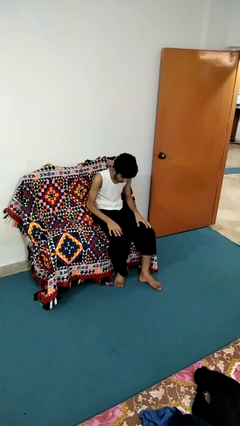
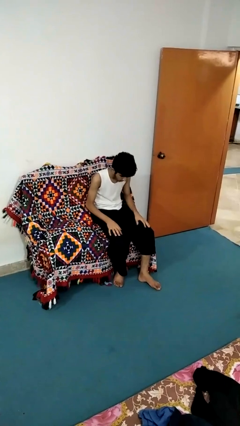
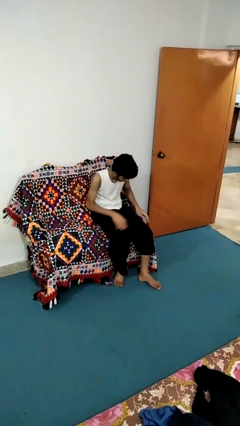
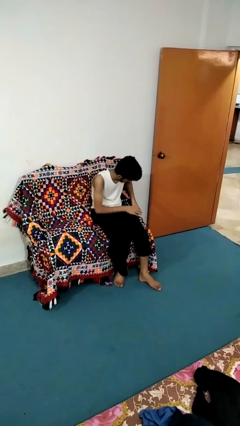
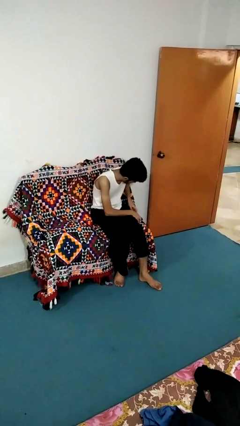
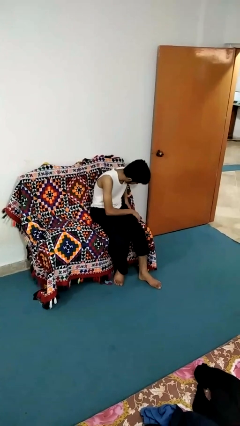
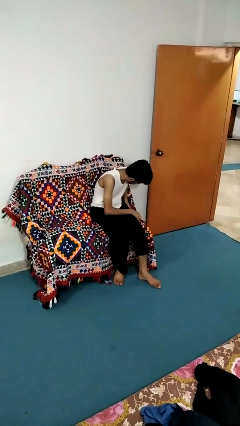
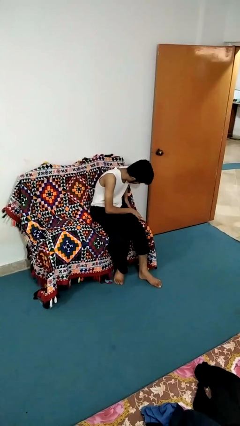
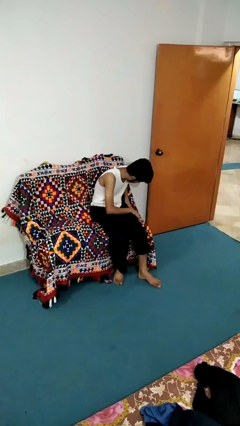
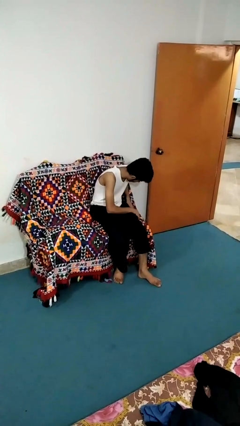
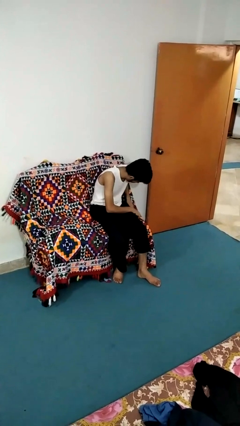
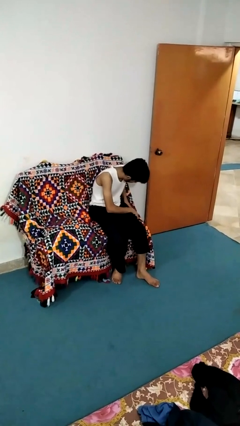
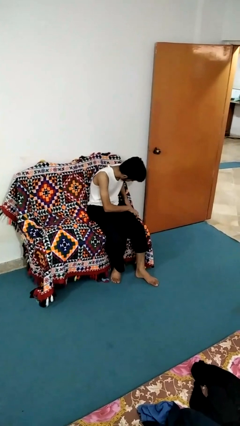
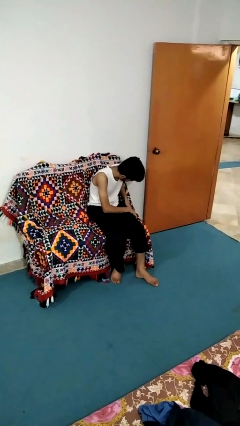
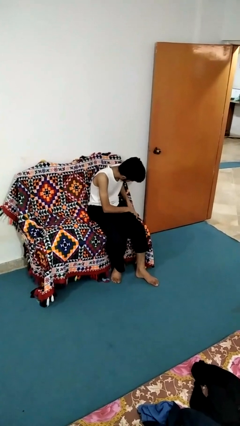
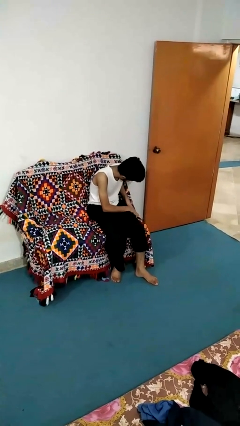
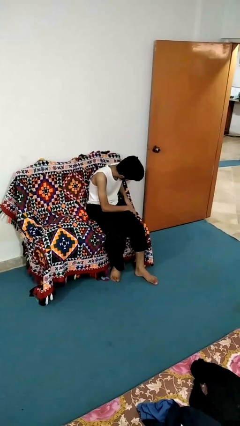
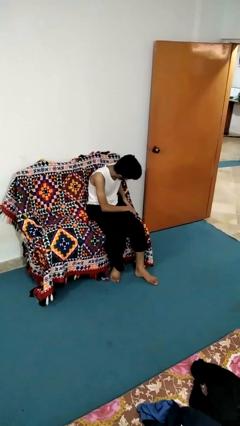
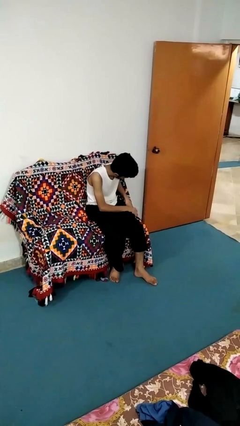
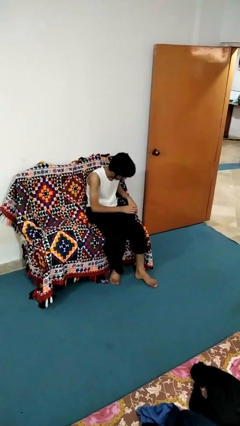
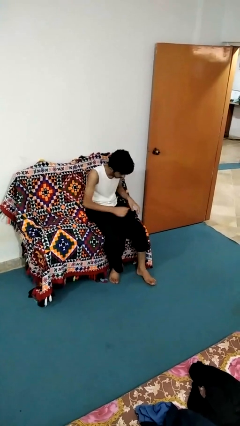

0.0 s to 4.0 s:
person searches in couch

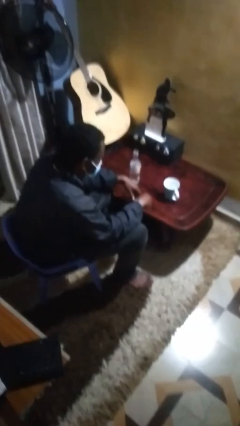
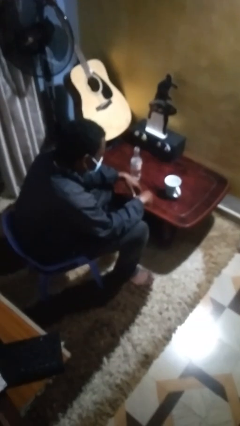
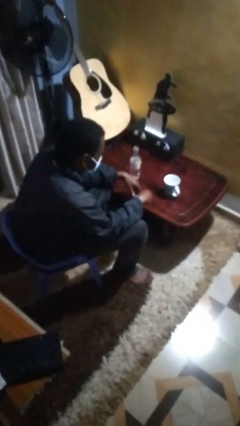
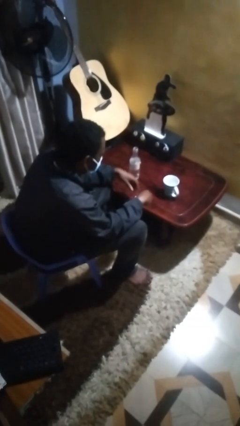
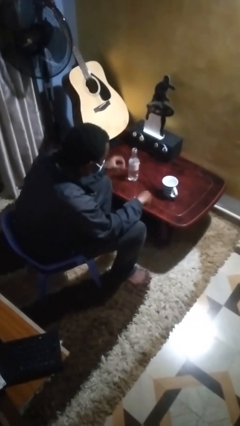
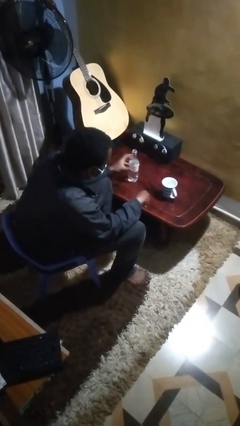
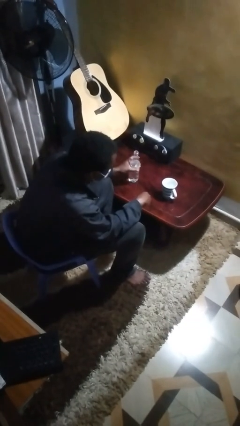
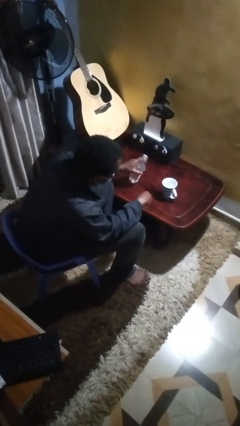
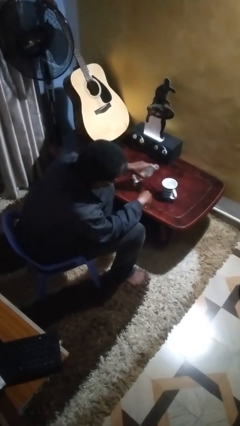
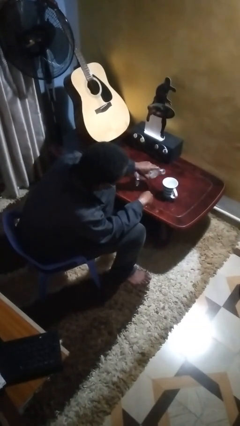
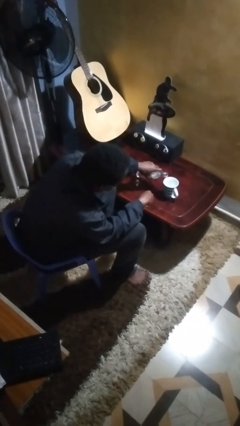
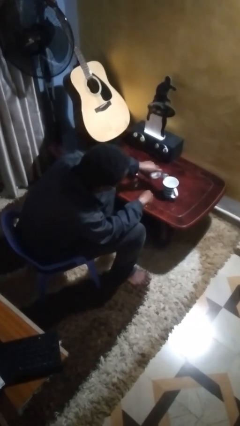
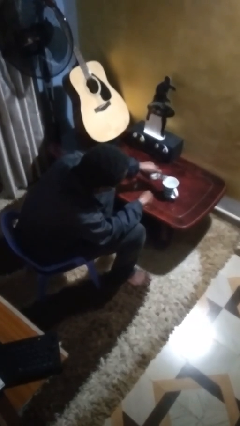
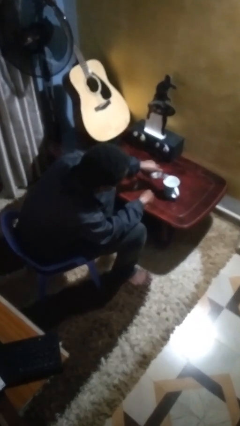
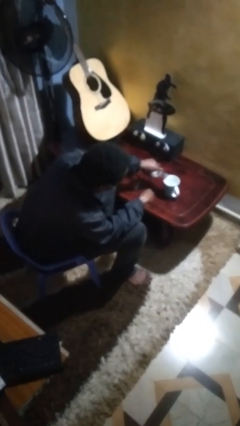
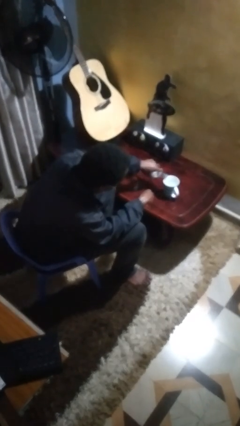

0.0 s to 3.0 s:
person pours liquid into cup

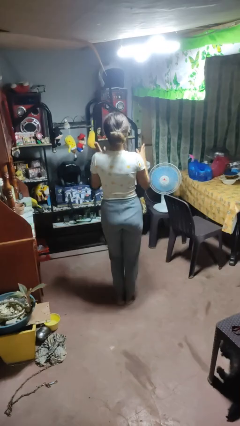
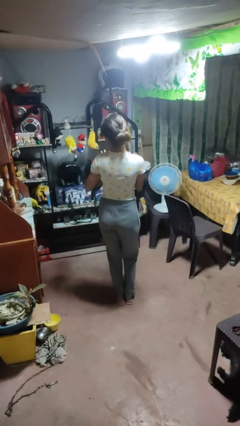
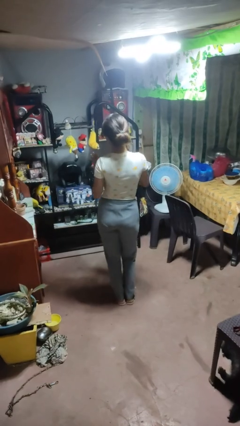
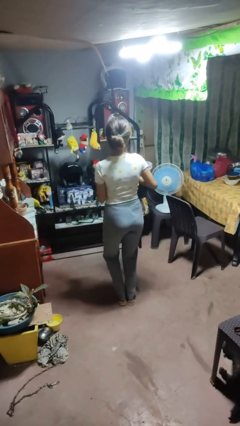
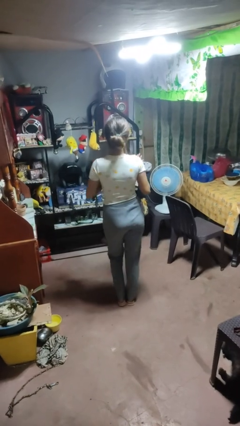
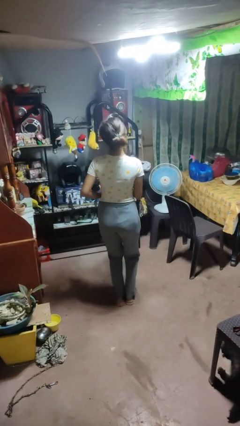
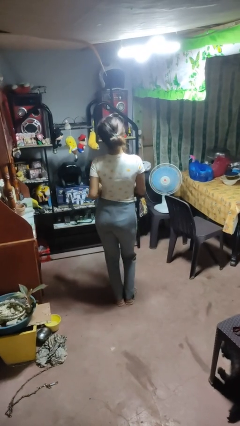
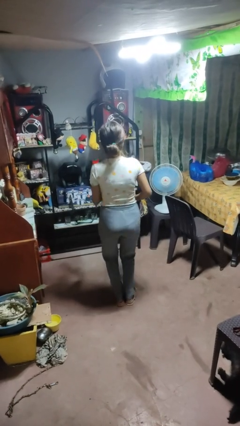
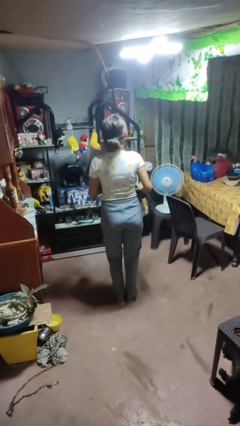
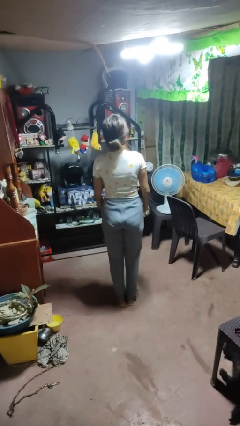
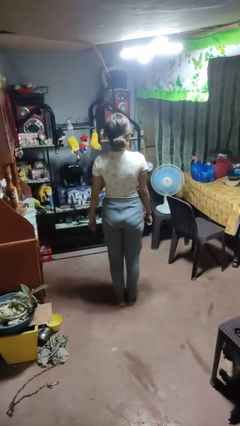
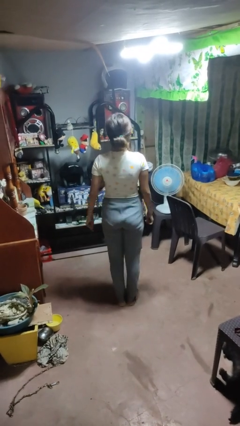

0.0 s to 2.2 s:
person dances in place

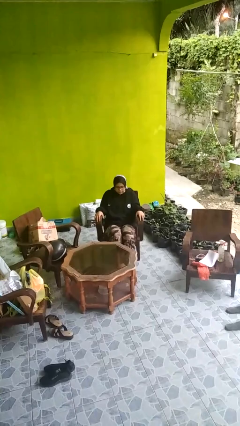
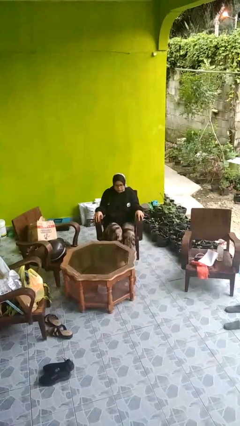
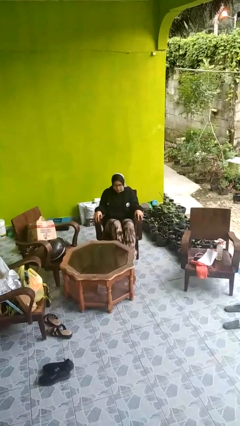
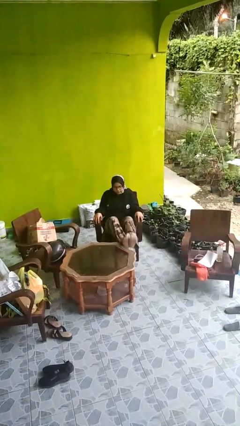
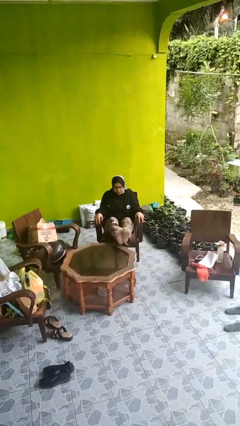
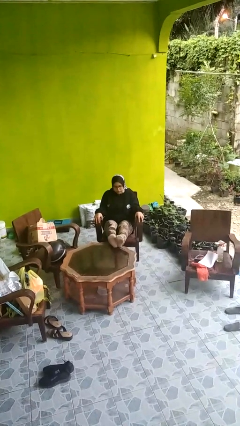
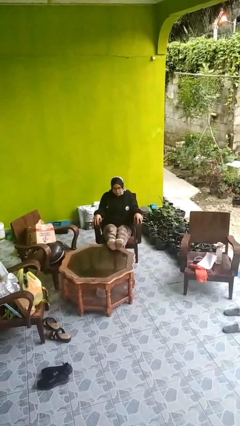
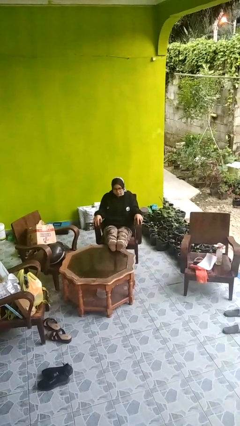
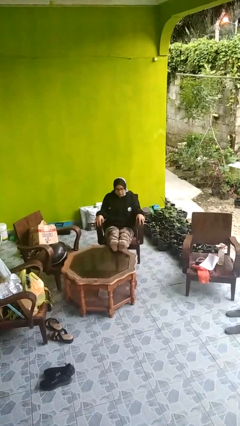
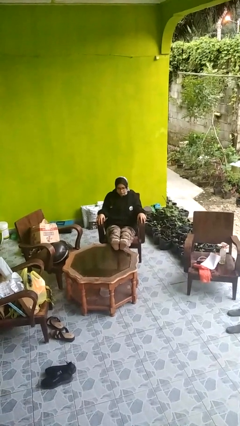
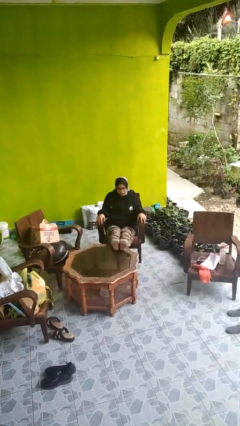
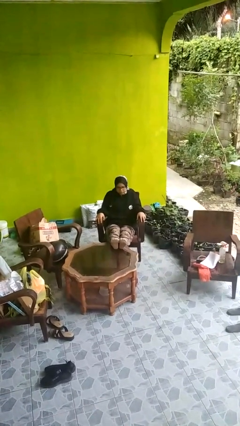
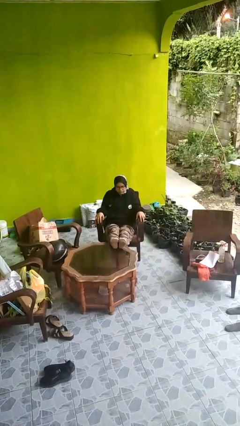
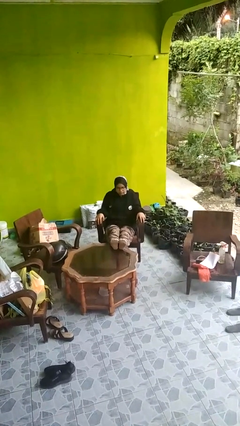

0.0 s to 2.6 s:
person puts feet up

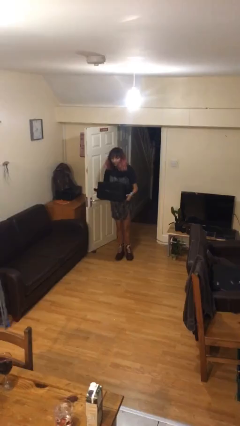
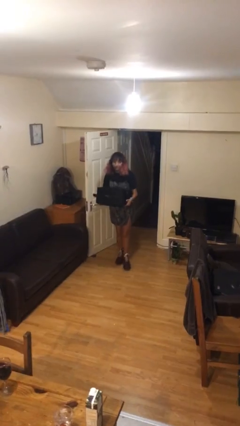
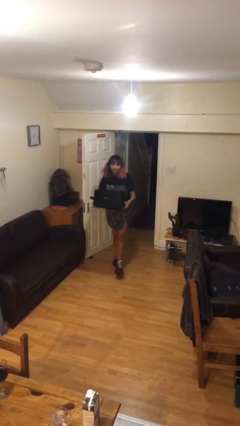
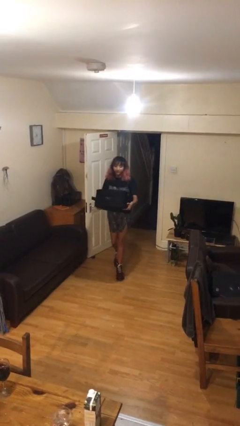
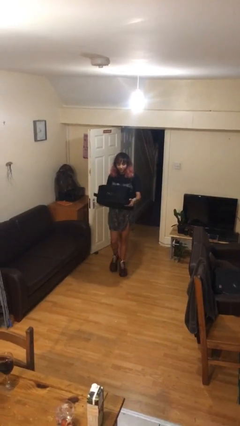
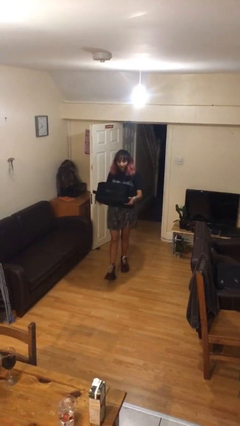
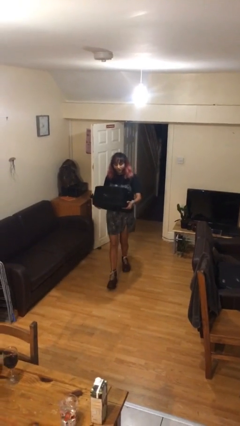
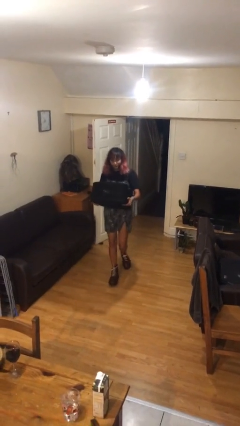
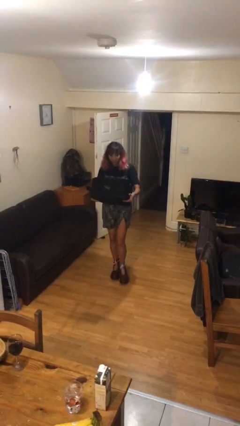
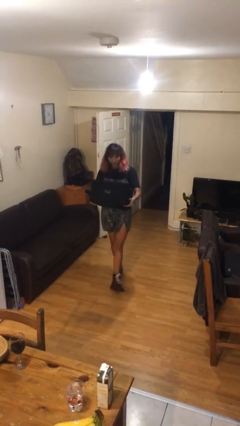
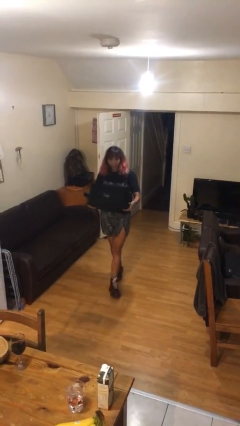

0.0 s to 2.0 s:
person carries heavy object

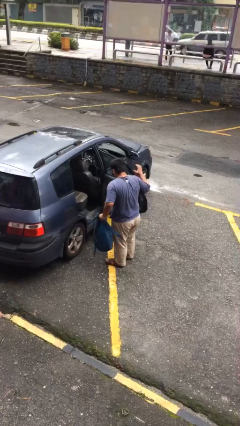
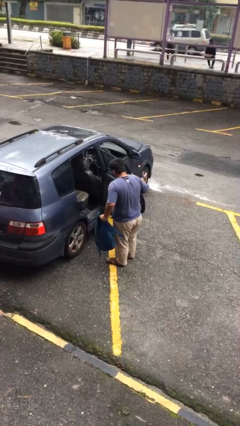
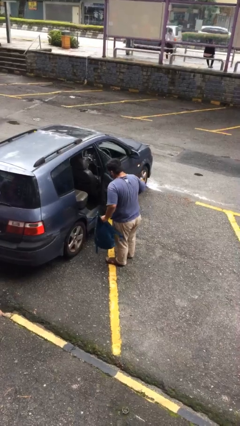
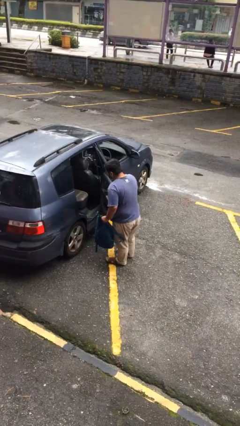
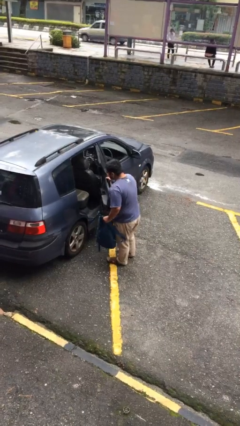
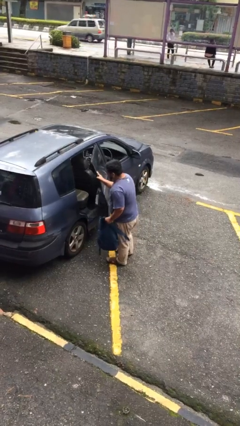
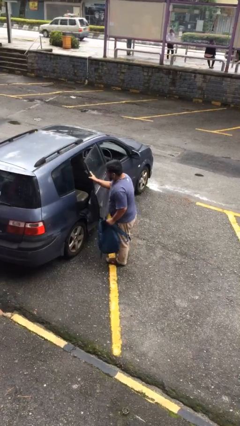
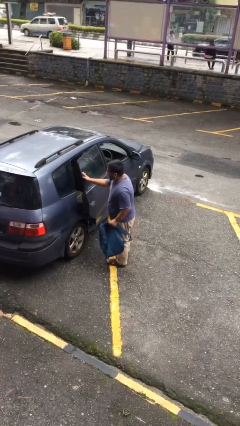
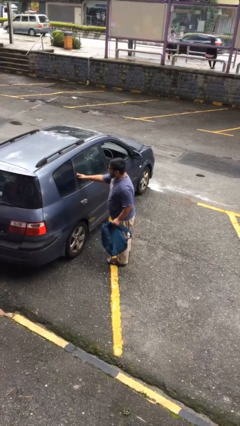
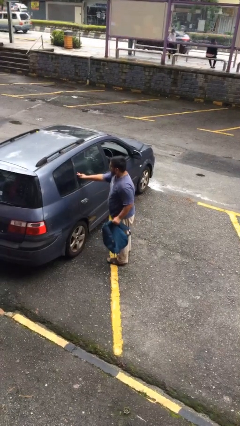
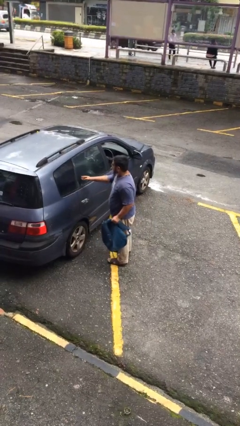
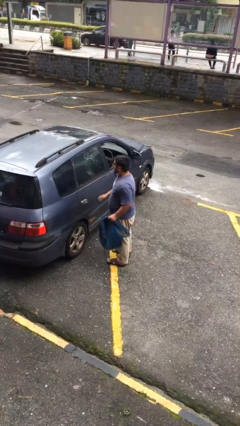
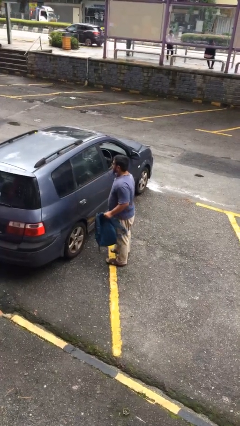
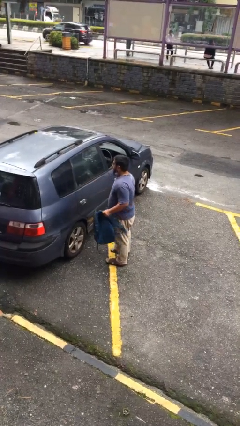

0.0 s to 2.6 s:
person closes car door

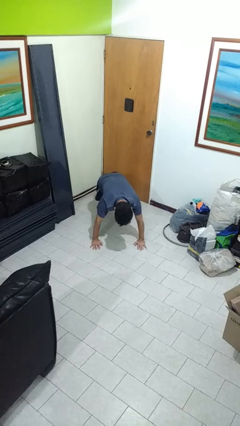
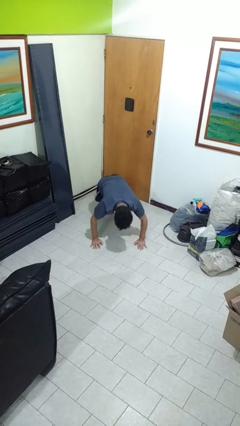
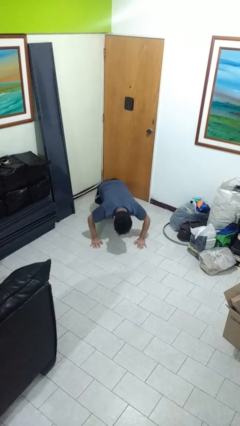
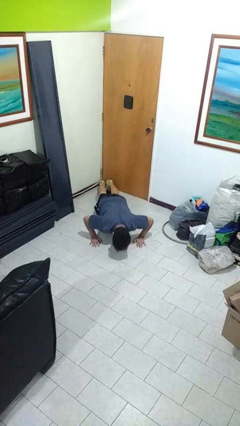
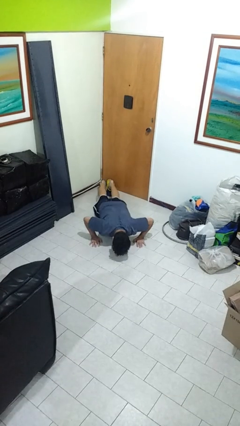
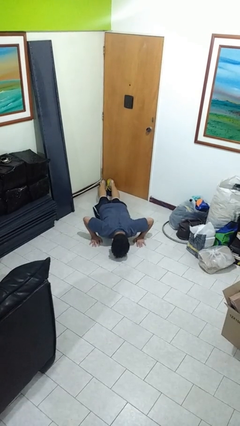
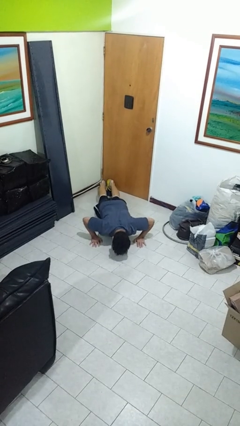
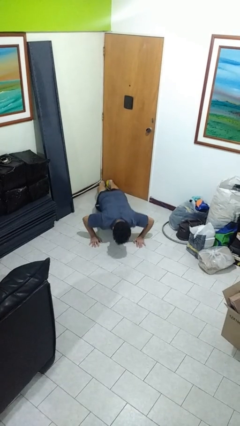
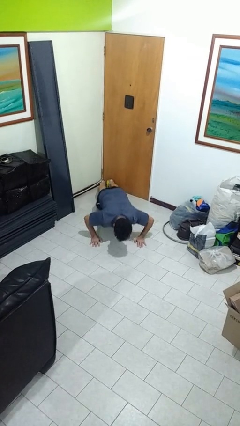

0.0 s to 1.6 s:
person exercises with pushup
